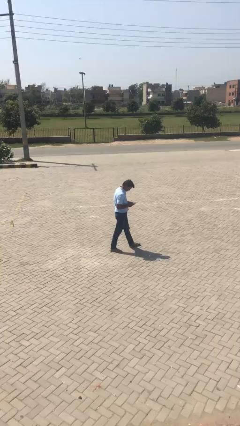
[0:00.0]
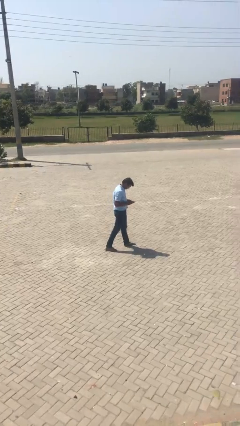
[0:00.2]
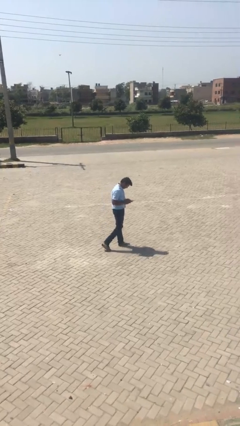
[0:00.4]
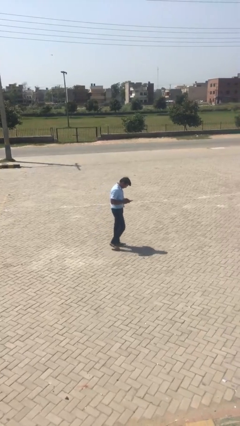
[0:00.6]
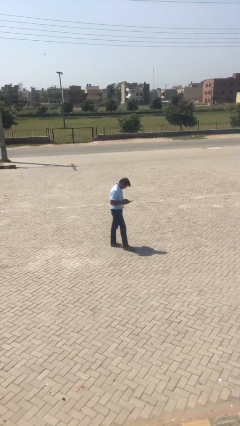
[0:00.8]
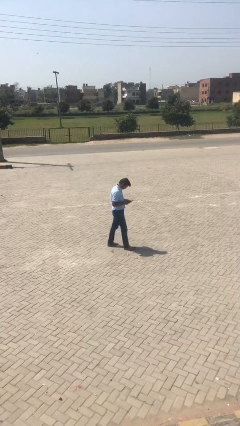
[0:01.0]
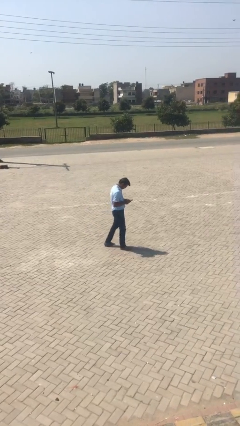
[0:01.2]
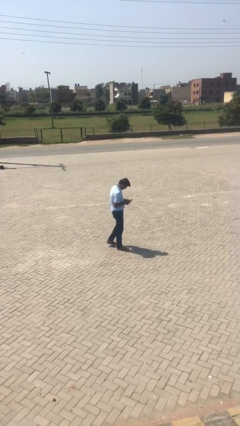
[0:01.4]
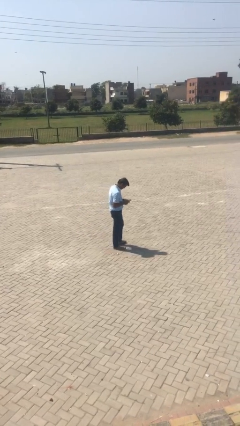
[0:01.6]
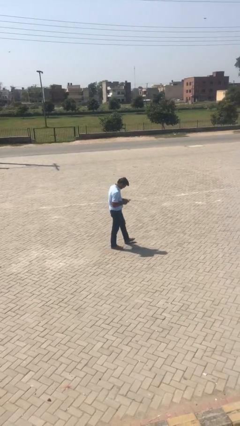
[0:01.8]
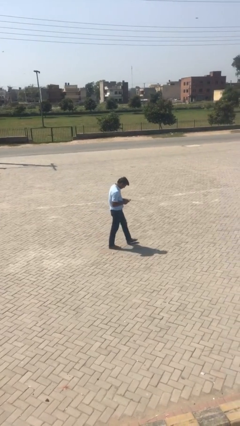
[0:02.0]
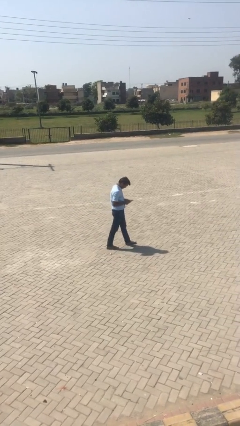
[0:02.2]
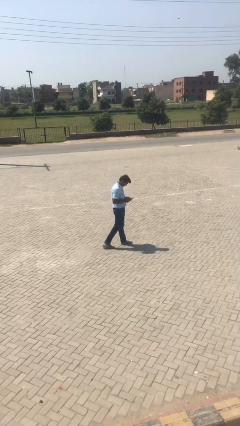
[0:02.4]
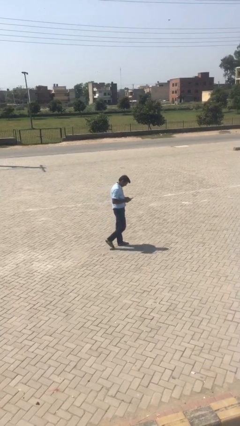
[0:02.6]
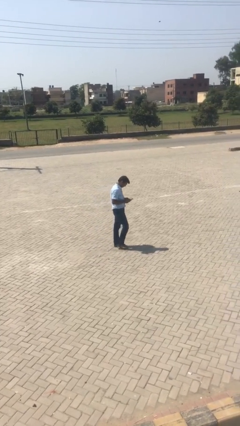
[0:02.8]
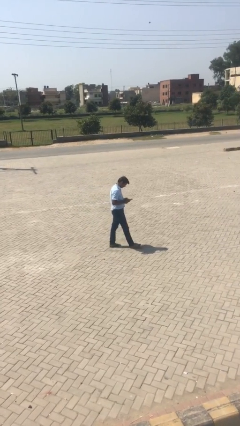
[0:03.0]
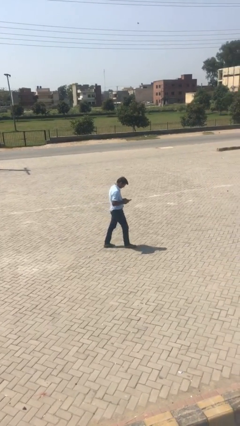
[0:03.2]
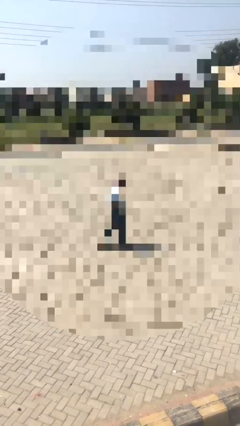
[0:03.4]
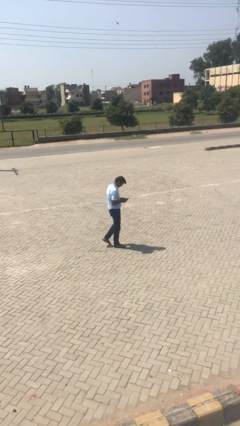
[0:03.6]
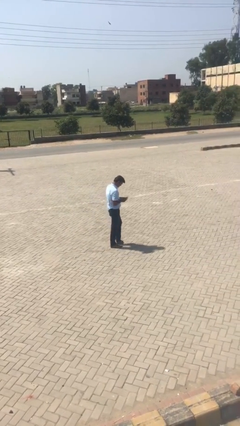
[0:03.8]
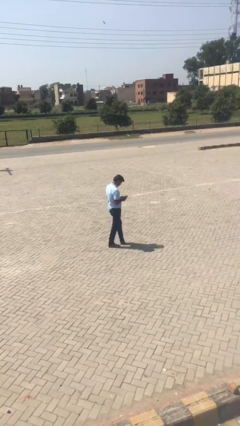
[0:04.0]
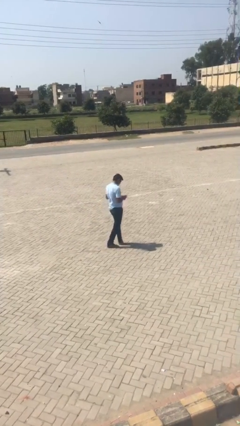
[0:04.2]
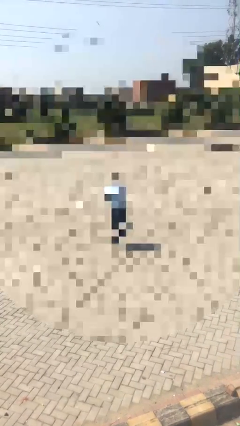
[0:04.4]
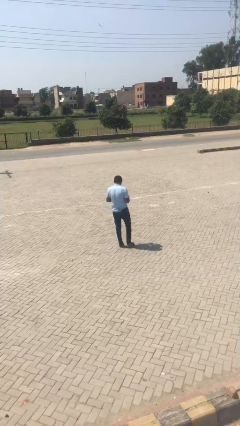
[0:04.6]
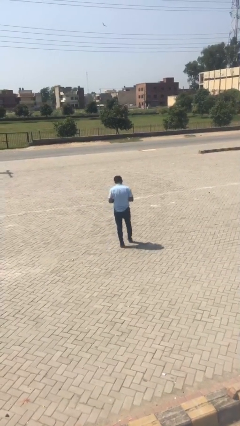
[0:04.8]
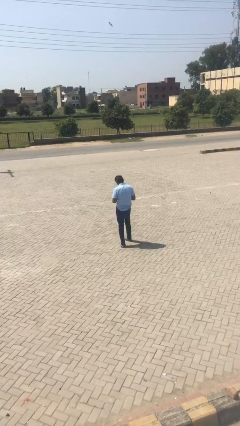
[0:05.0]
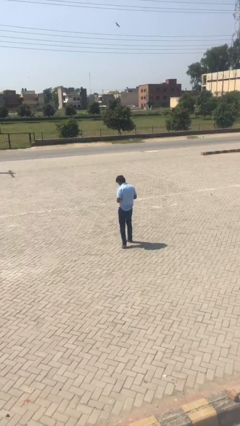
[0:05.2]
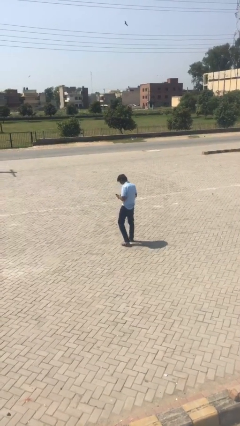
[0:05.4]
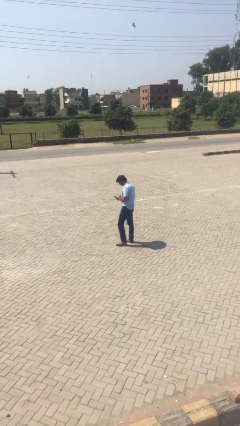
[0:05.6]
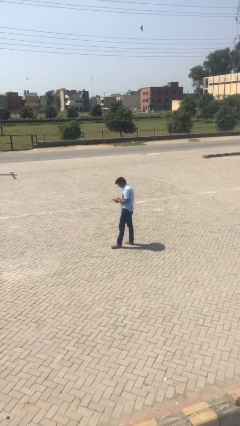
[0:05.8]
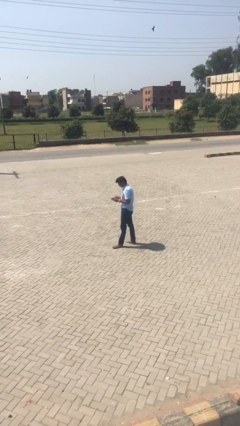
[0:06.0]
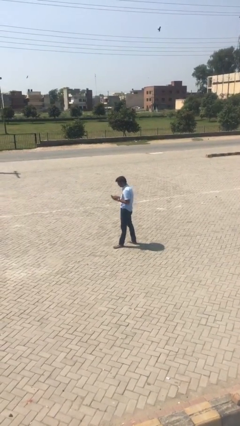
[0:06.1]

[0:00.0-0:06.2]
person texts on phone

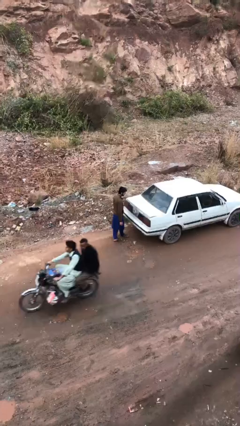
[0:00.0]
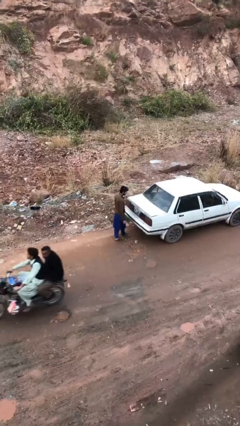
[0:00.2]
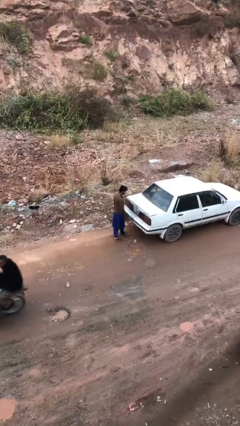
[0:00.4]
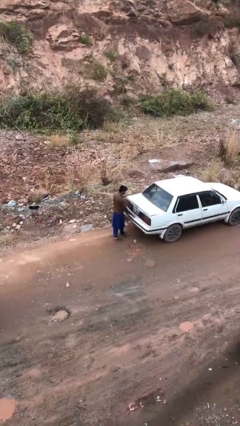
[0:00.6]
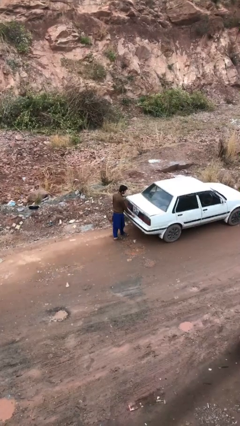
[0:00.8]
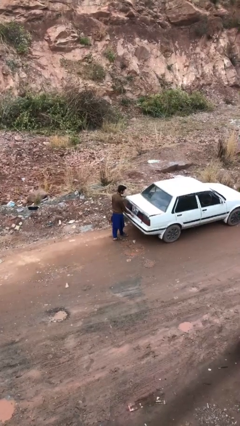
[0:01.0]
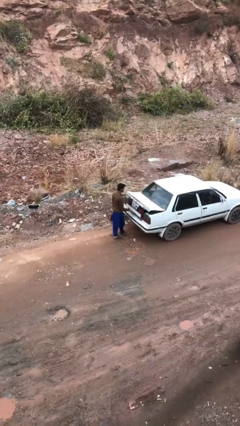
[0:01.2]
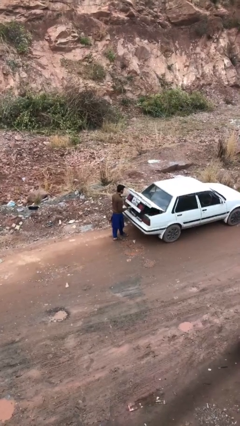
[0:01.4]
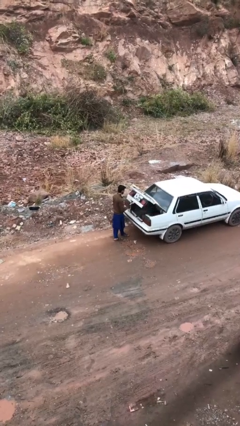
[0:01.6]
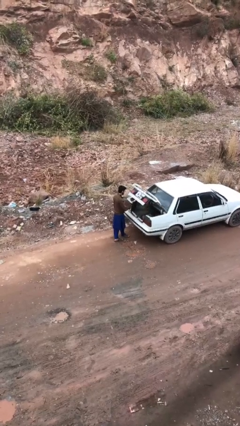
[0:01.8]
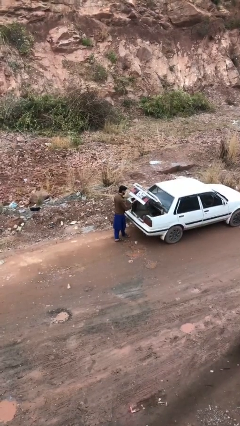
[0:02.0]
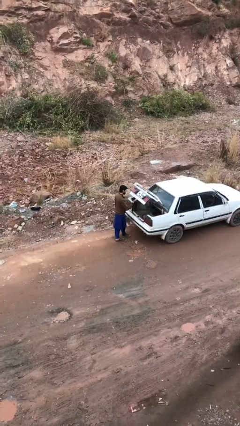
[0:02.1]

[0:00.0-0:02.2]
person opens car trunk

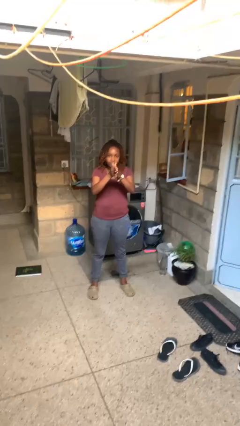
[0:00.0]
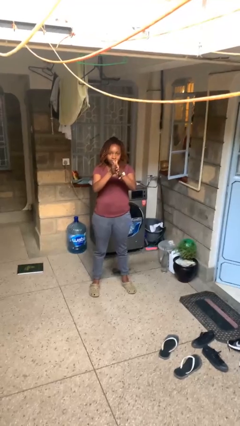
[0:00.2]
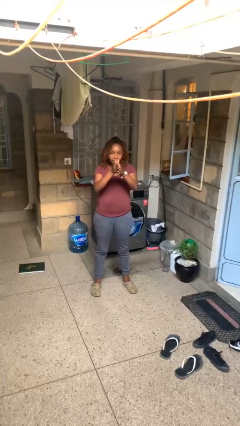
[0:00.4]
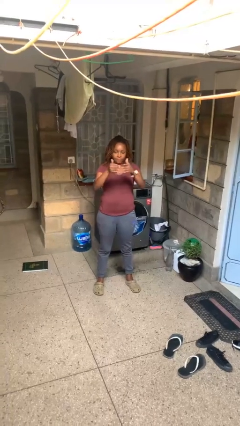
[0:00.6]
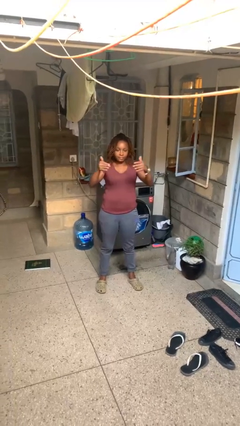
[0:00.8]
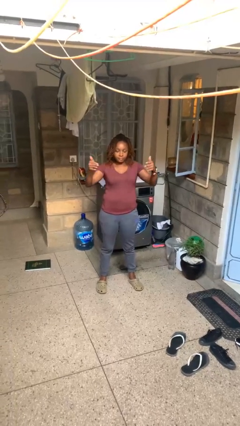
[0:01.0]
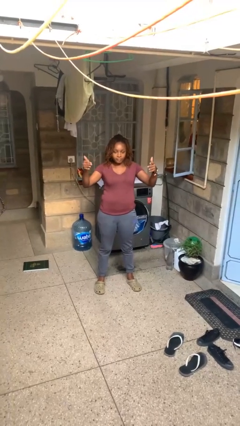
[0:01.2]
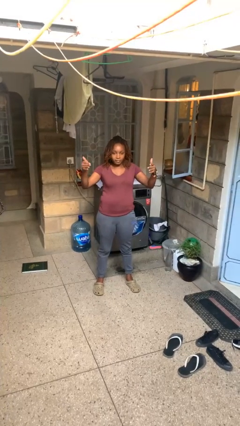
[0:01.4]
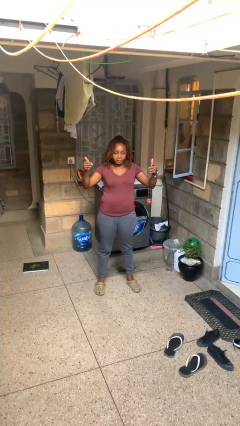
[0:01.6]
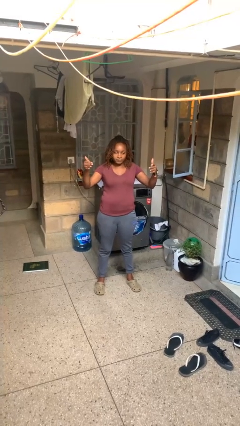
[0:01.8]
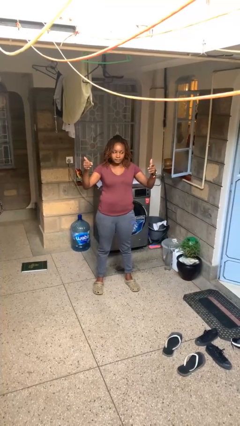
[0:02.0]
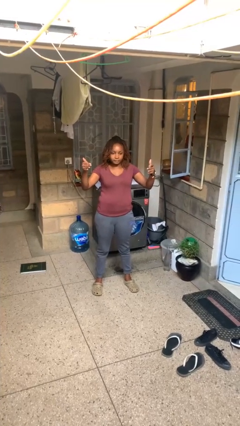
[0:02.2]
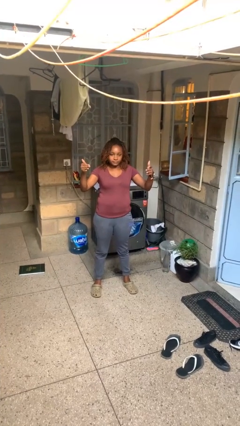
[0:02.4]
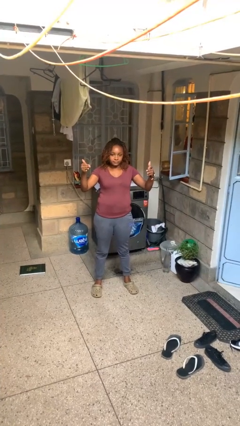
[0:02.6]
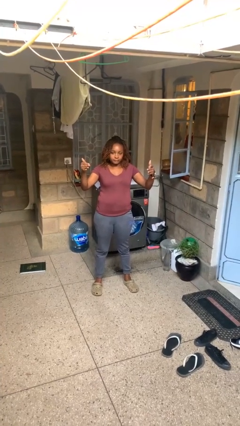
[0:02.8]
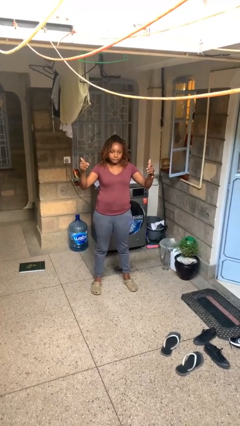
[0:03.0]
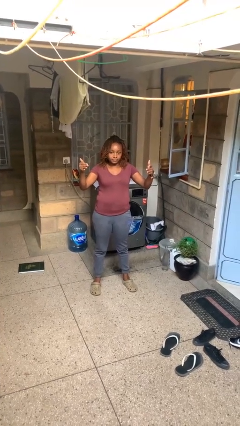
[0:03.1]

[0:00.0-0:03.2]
person gestures zoom out

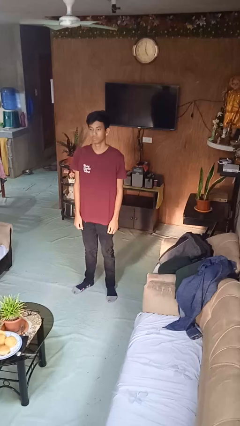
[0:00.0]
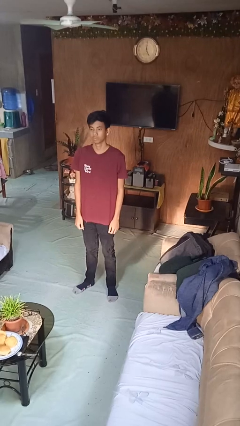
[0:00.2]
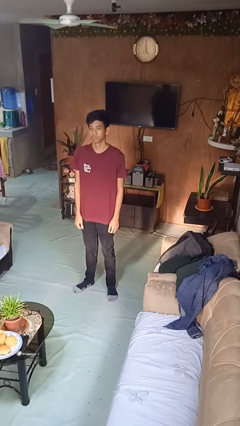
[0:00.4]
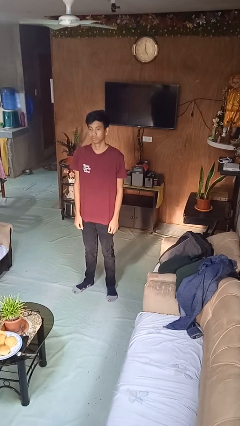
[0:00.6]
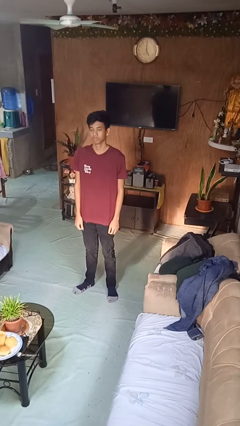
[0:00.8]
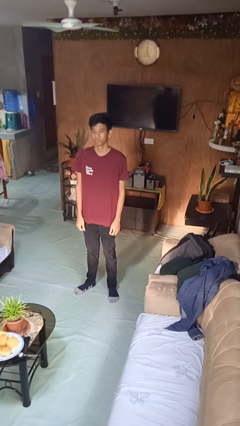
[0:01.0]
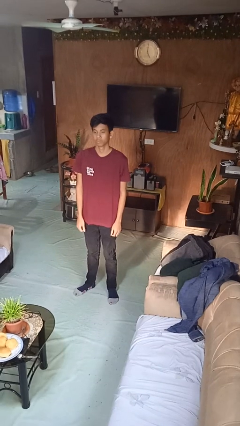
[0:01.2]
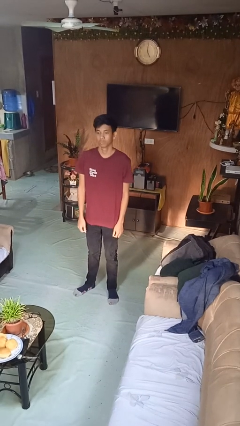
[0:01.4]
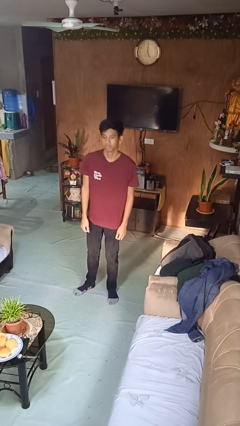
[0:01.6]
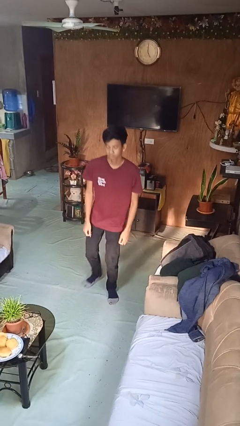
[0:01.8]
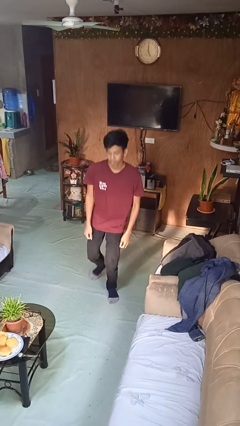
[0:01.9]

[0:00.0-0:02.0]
person stands up from floor

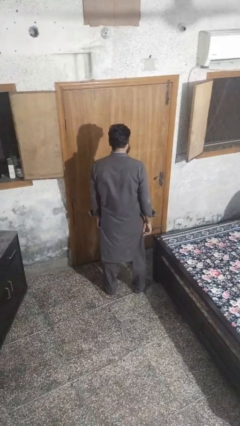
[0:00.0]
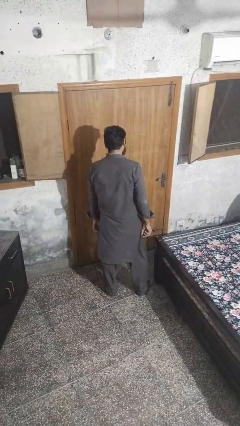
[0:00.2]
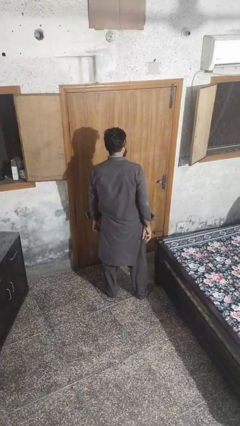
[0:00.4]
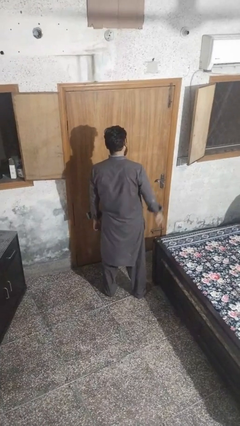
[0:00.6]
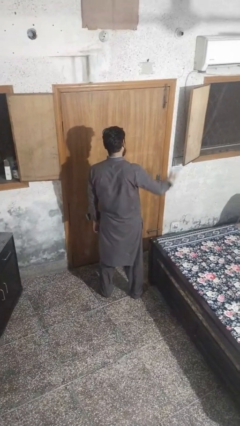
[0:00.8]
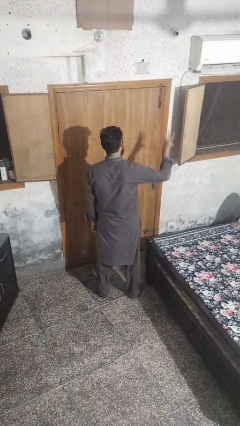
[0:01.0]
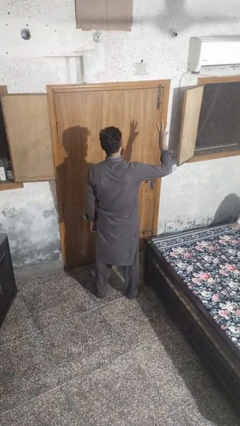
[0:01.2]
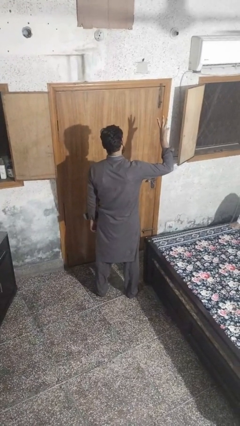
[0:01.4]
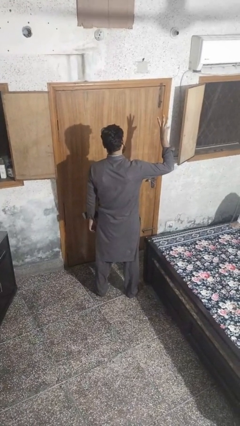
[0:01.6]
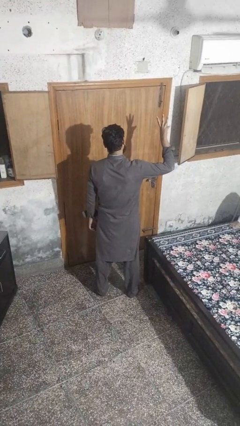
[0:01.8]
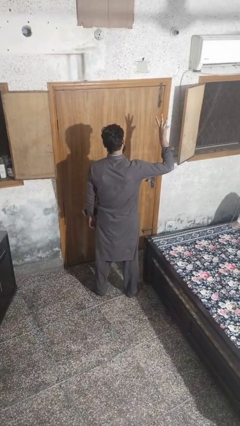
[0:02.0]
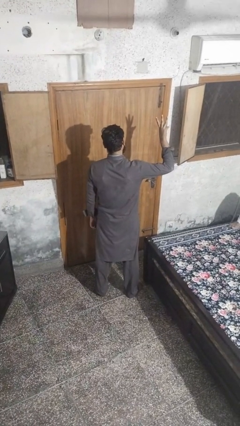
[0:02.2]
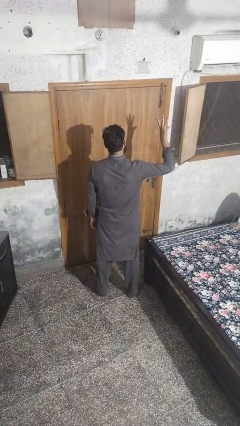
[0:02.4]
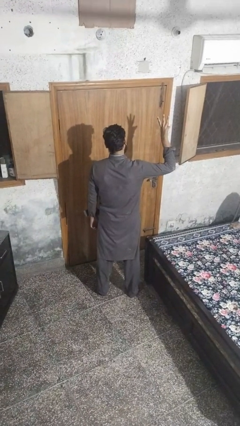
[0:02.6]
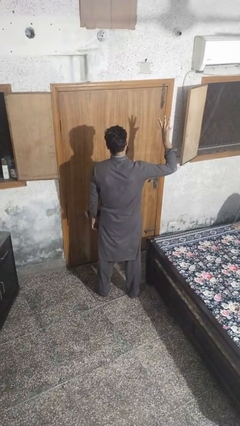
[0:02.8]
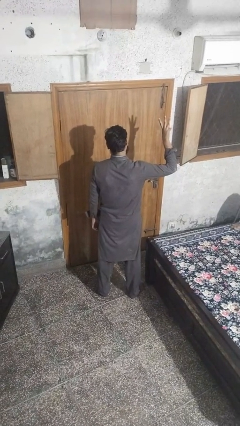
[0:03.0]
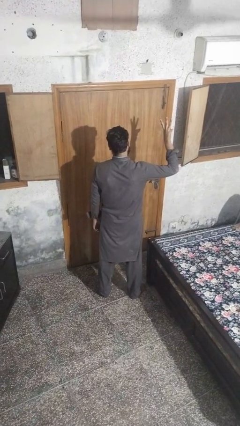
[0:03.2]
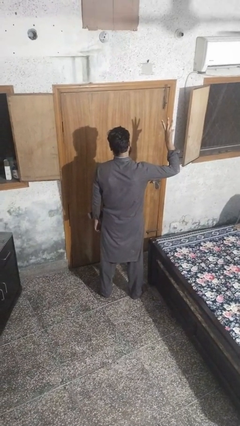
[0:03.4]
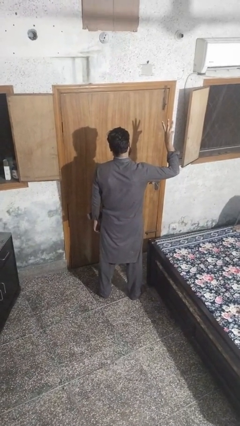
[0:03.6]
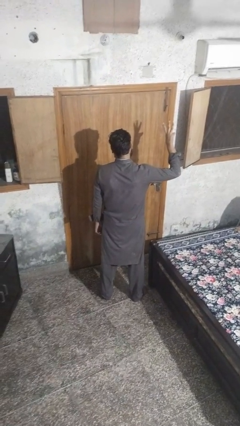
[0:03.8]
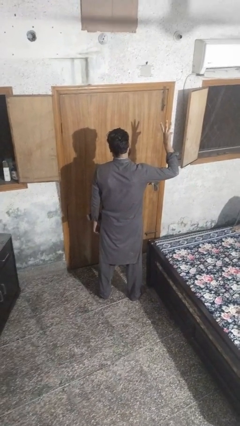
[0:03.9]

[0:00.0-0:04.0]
person gestures number three
